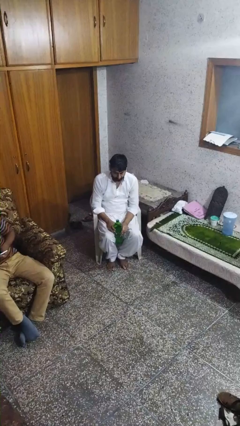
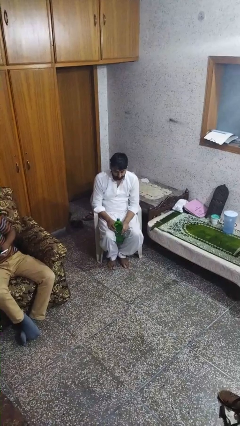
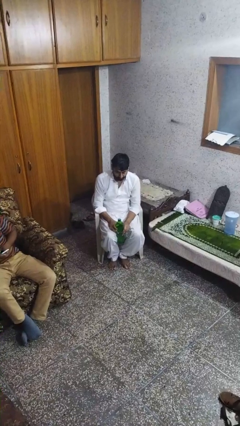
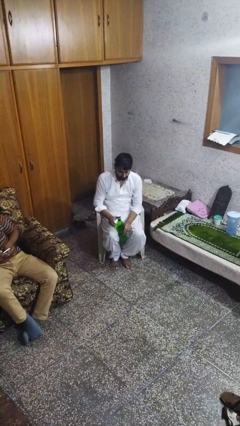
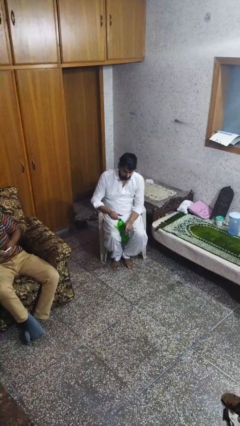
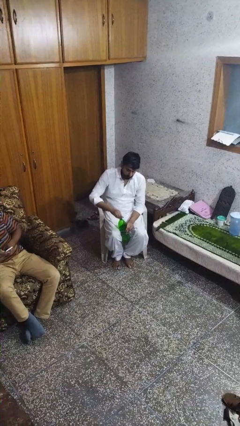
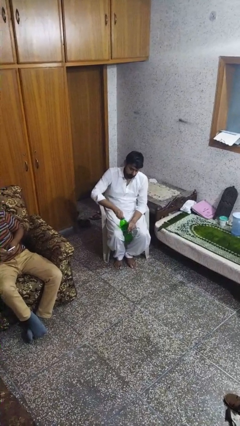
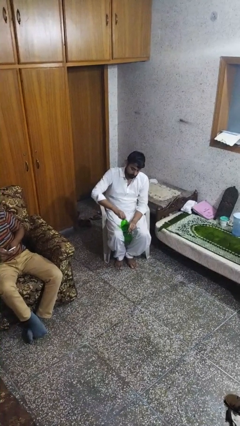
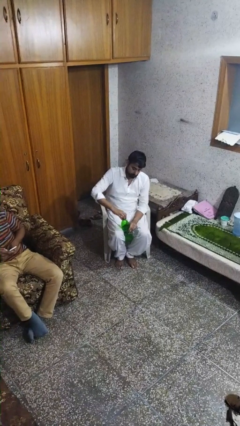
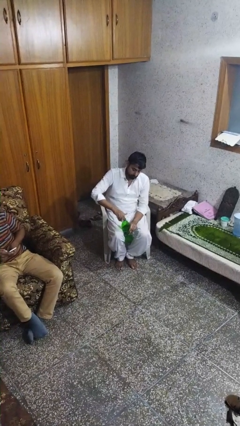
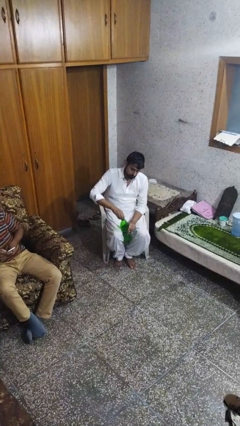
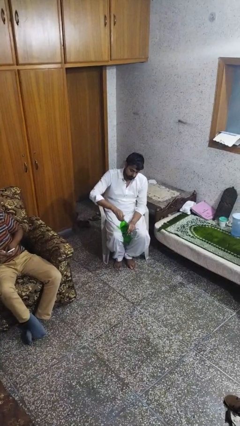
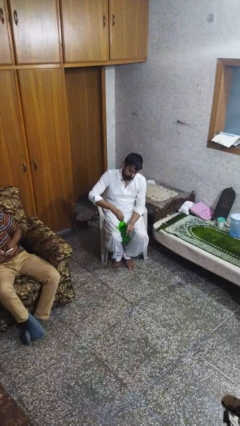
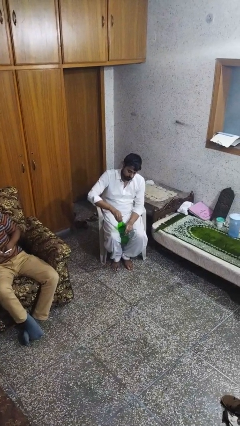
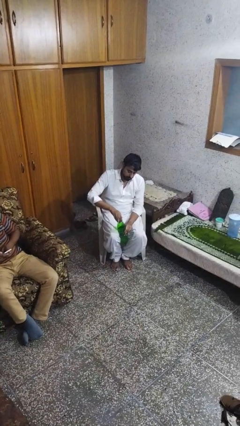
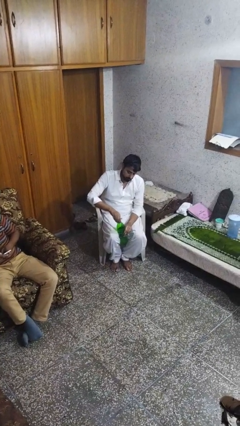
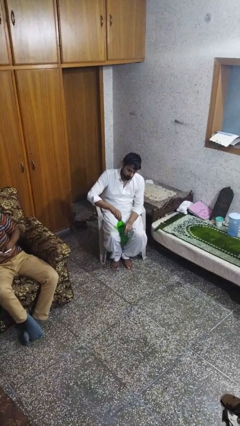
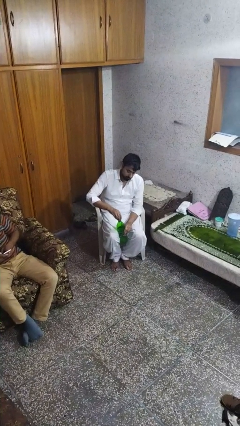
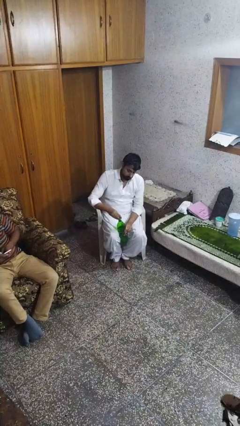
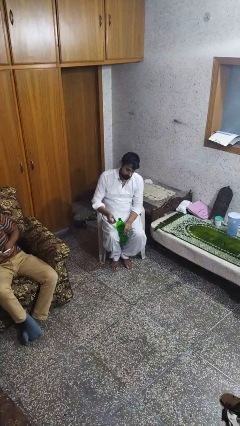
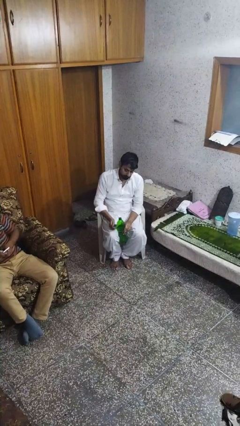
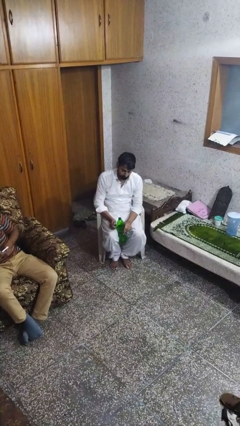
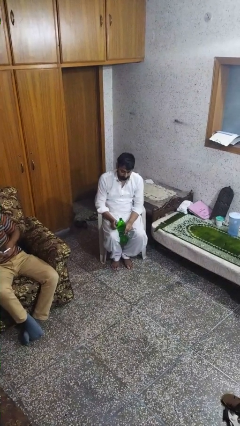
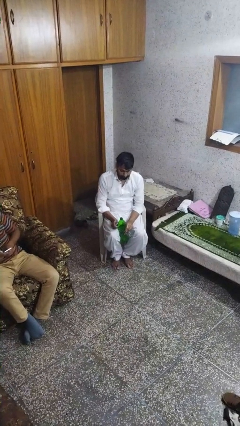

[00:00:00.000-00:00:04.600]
person unscrews lid from bottle

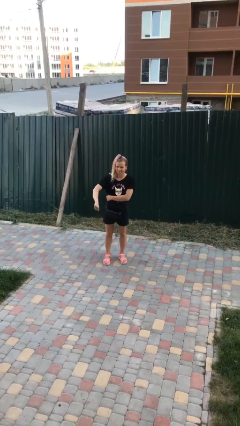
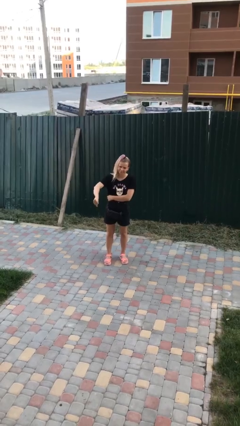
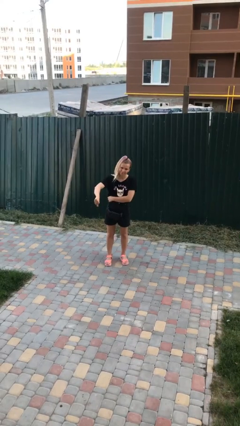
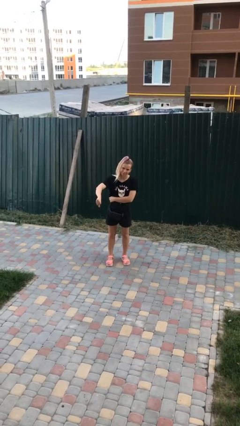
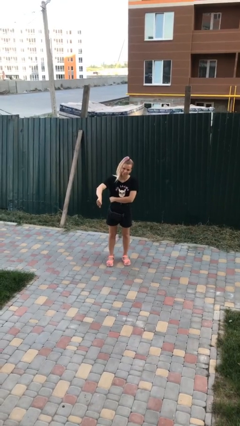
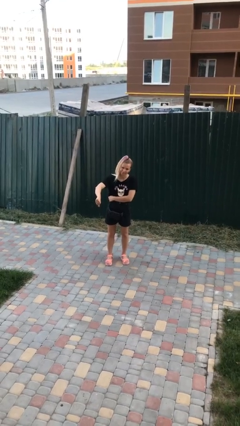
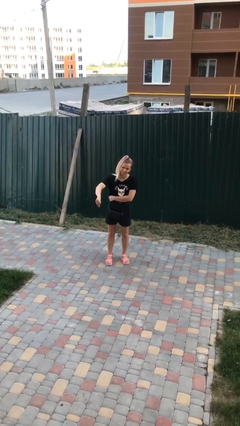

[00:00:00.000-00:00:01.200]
person gestures thumbs down

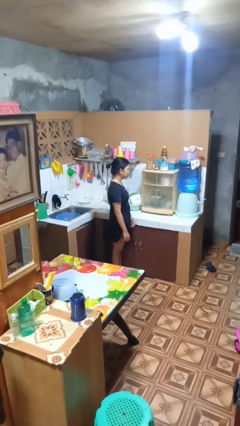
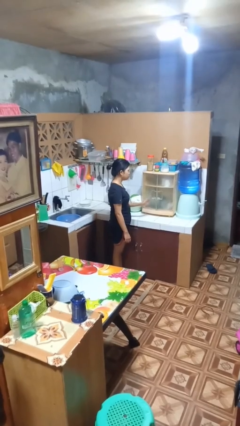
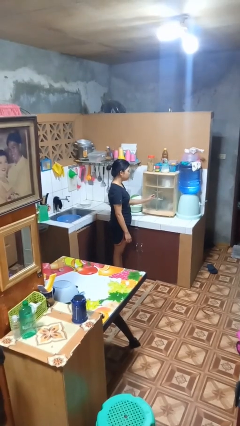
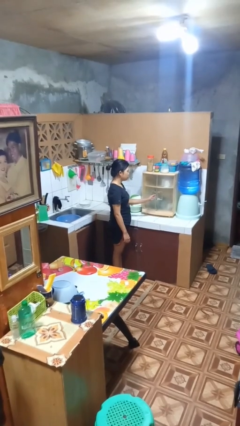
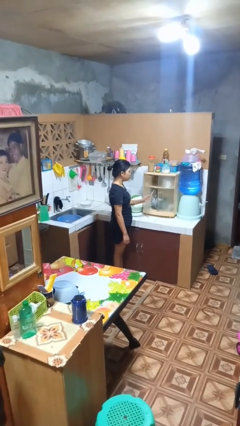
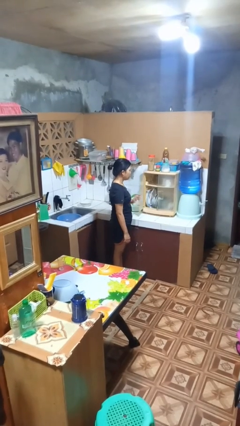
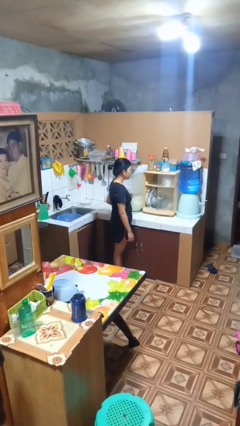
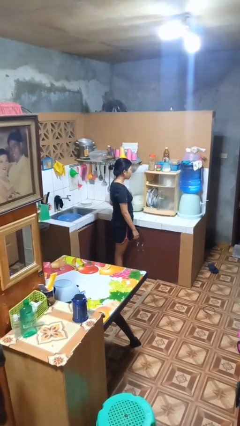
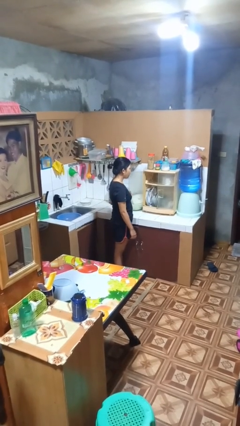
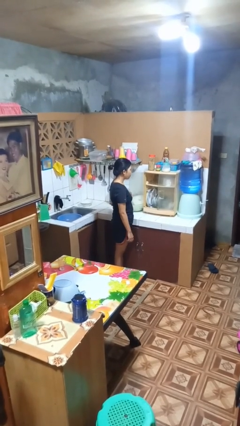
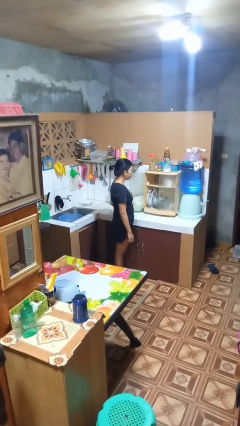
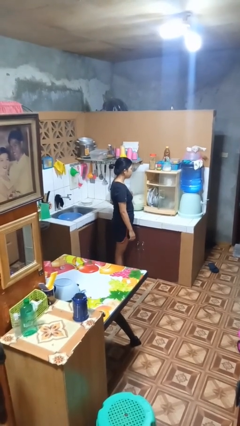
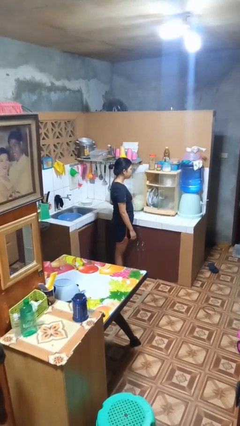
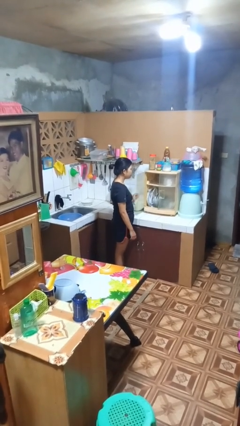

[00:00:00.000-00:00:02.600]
person opens kitchen drawer

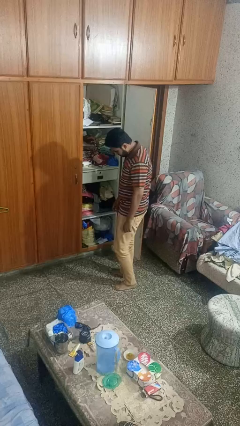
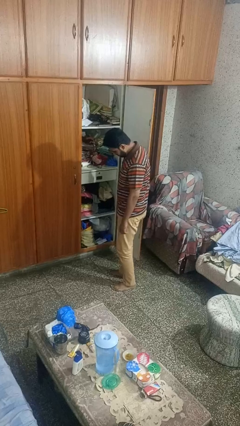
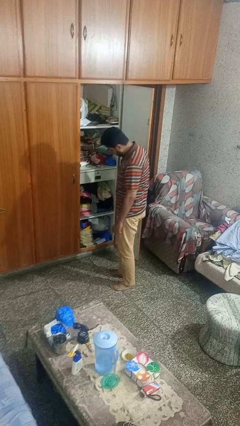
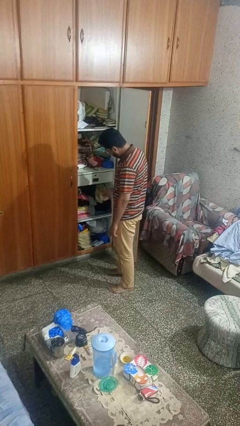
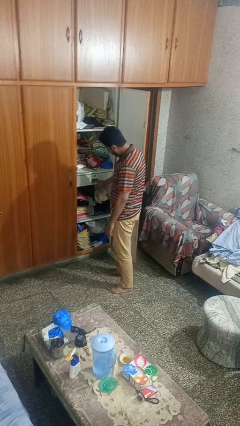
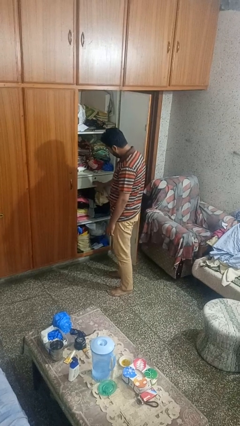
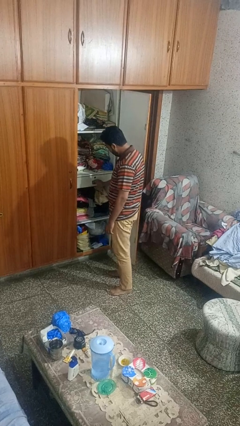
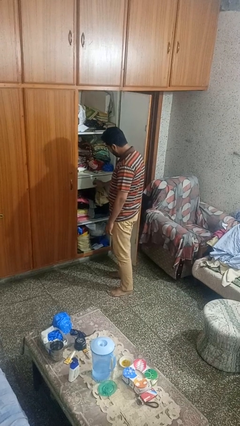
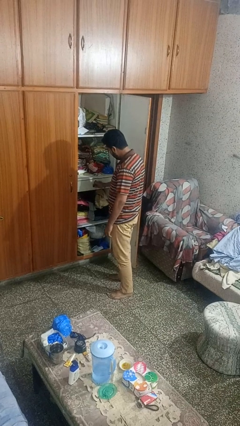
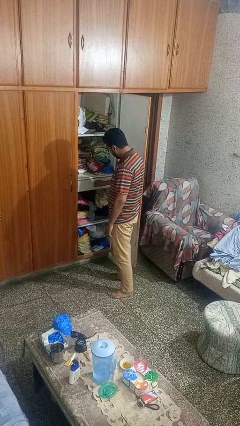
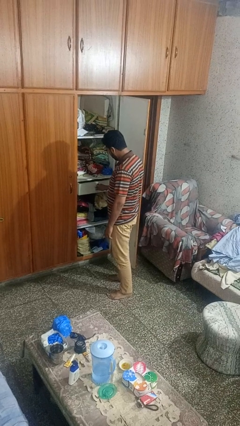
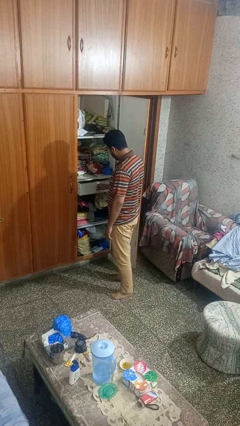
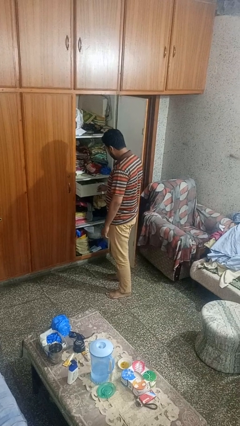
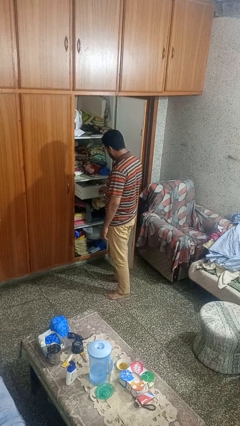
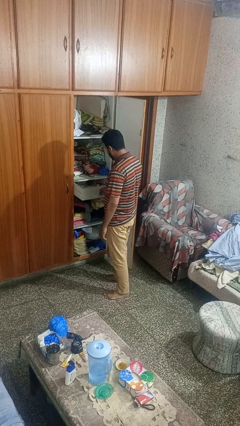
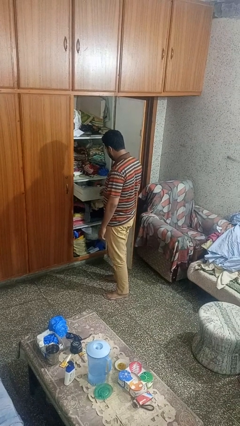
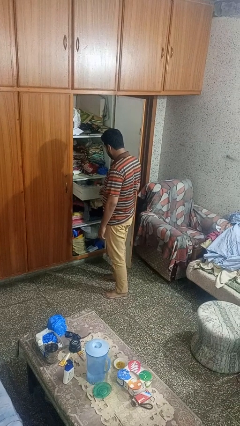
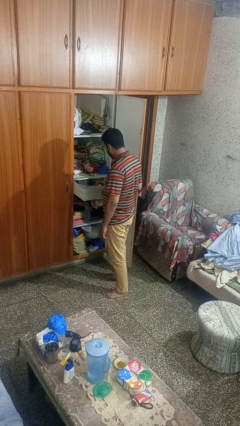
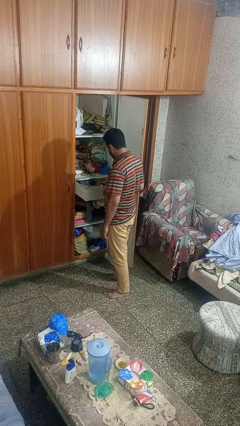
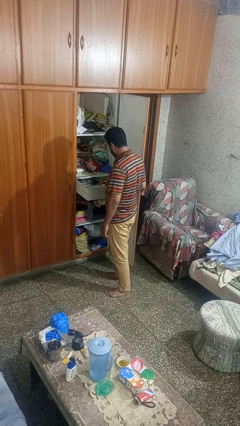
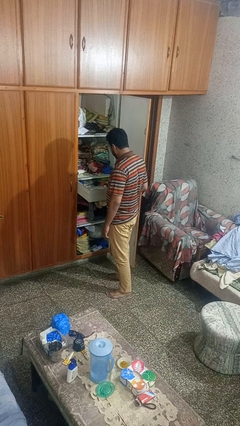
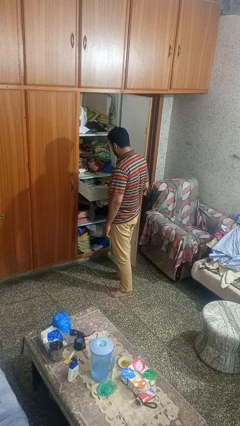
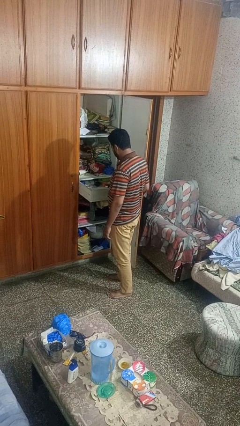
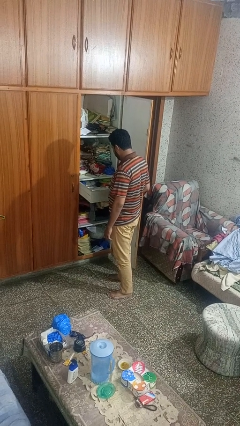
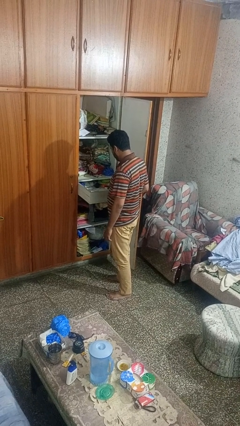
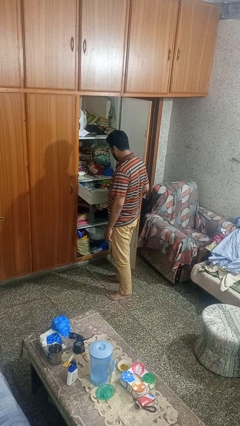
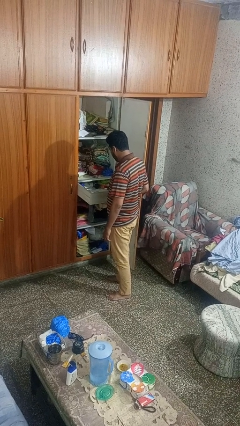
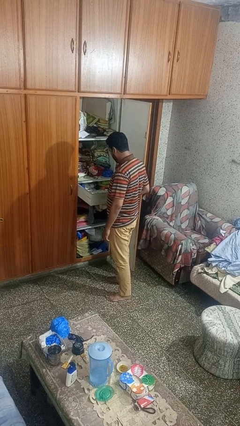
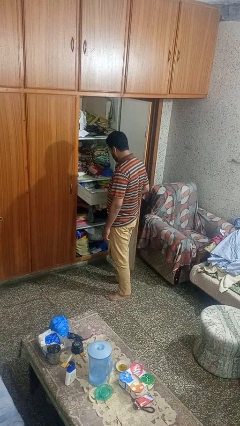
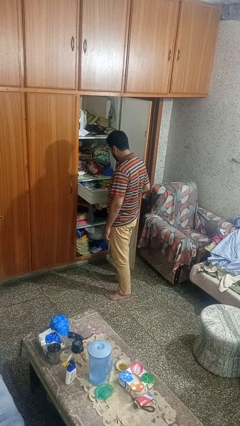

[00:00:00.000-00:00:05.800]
person opens dresser drawer

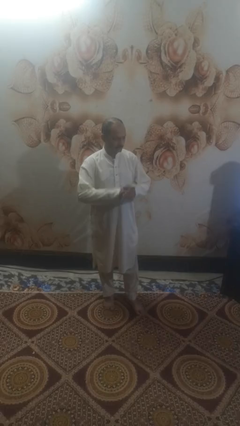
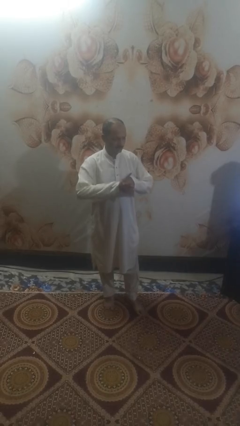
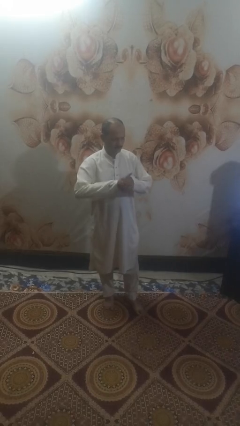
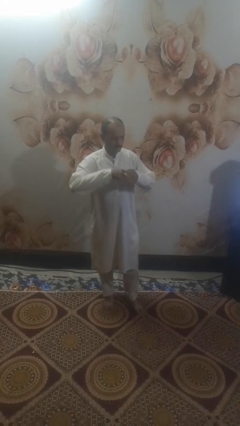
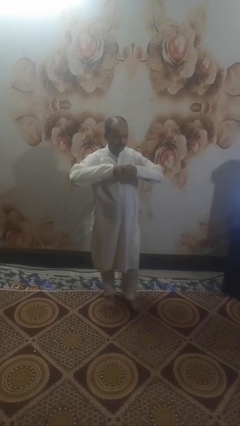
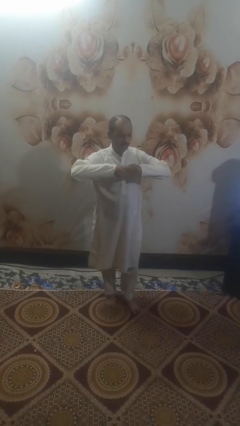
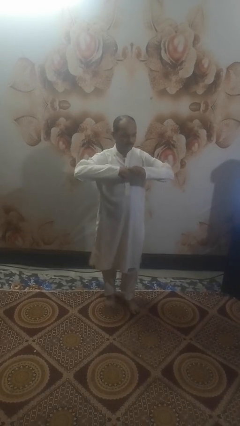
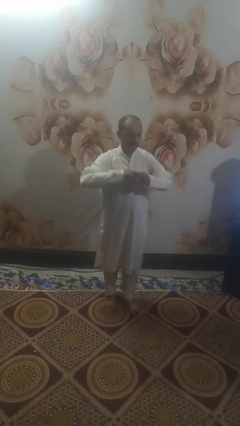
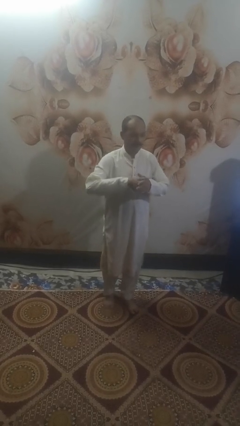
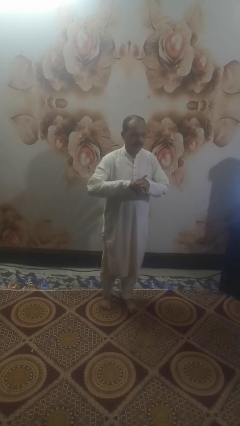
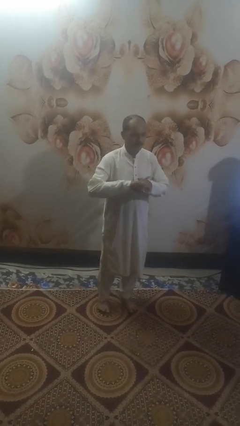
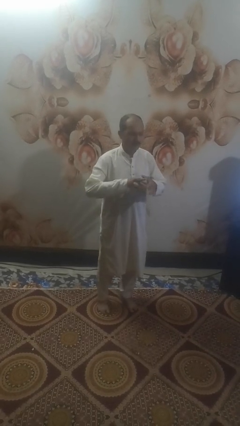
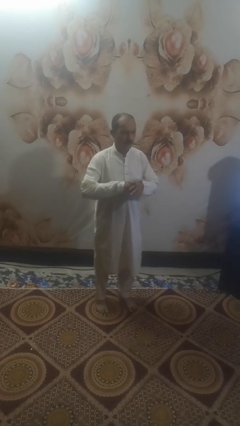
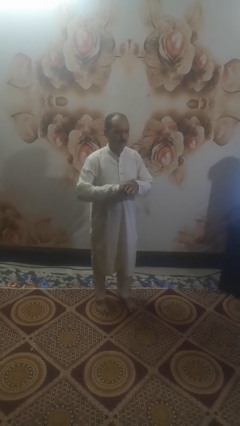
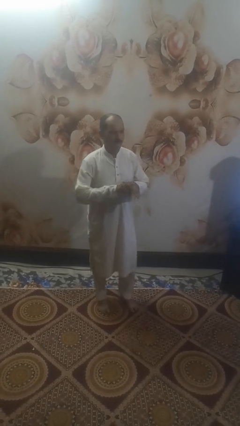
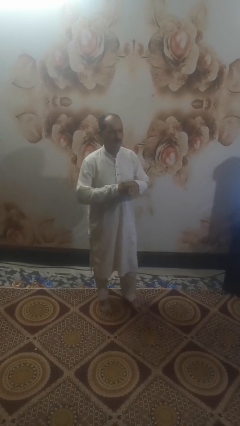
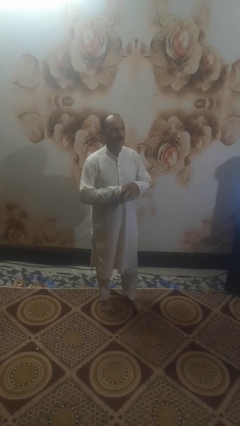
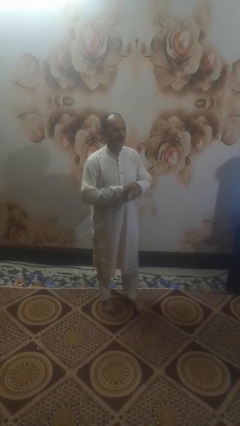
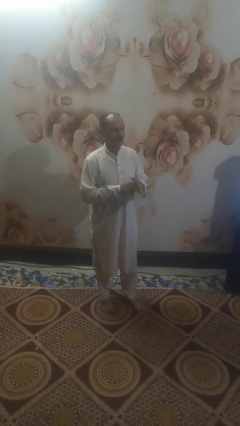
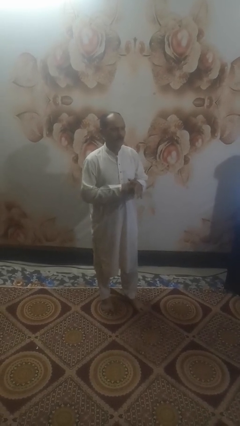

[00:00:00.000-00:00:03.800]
person cracks knuckles
